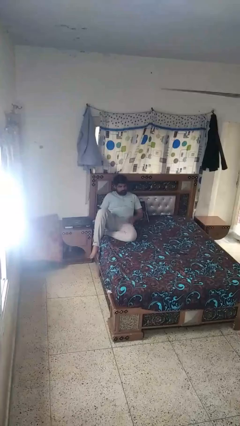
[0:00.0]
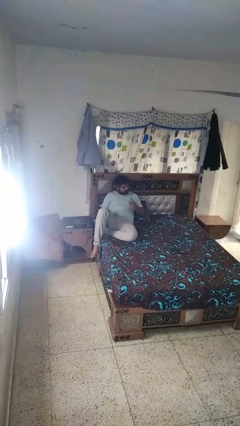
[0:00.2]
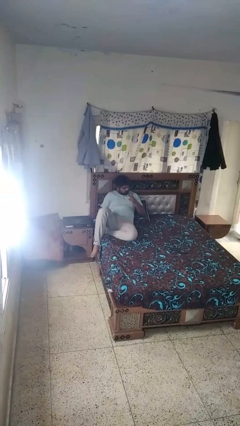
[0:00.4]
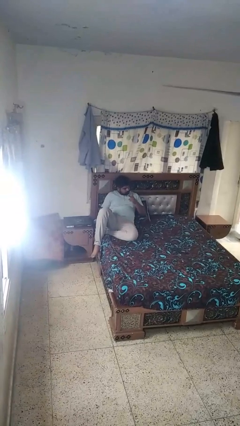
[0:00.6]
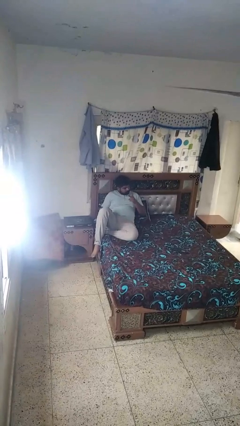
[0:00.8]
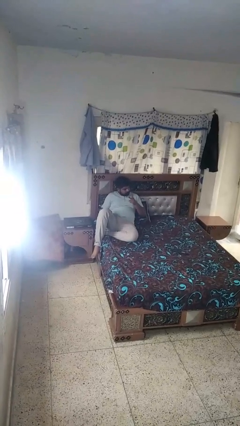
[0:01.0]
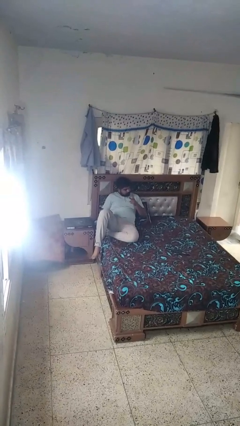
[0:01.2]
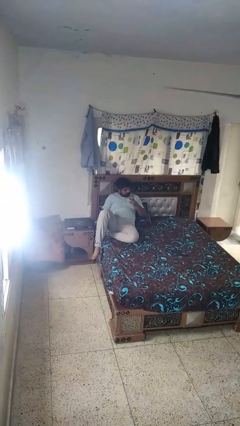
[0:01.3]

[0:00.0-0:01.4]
person gestures peace

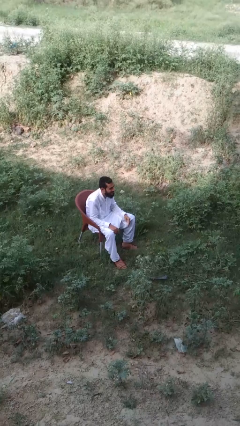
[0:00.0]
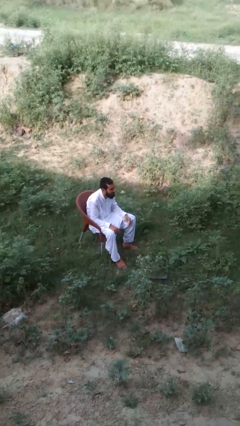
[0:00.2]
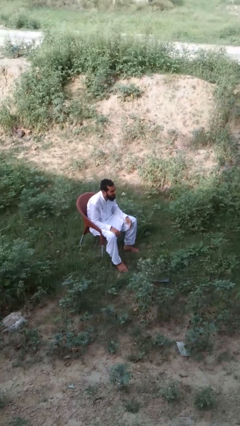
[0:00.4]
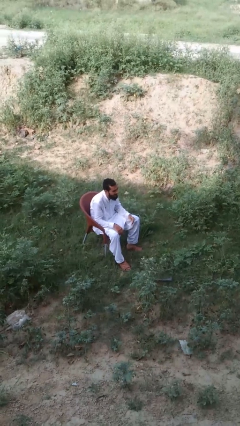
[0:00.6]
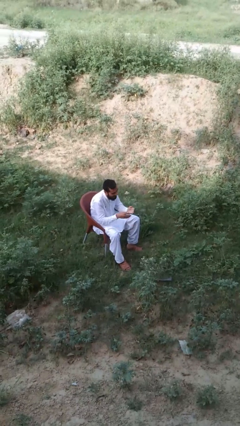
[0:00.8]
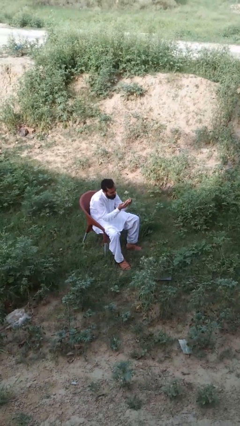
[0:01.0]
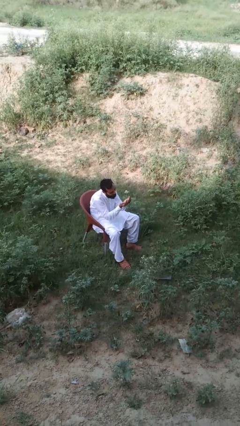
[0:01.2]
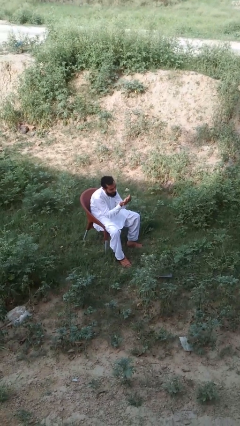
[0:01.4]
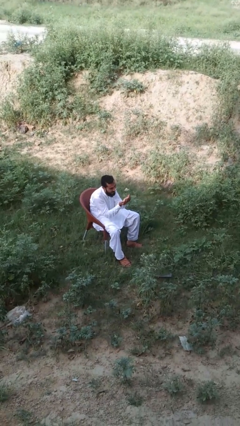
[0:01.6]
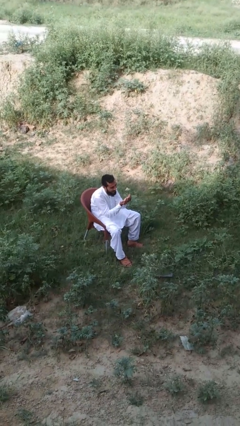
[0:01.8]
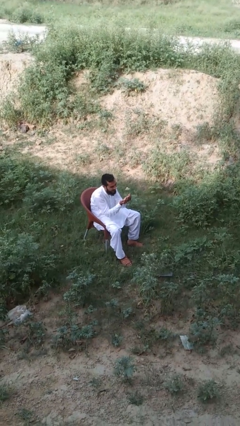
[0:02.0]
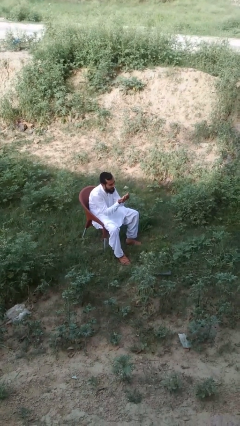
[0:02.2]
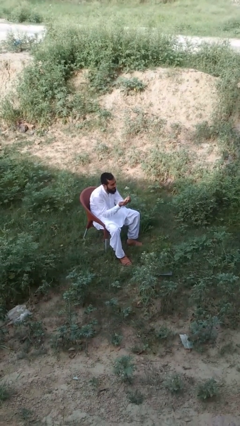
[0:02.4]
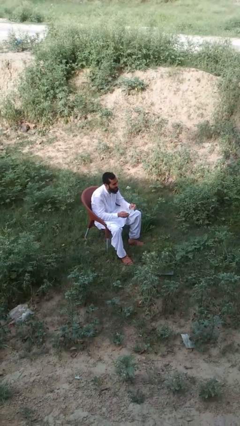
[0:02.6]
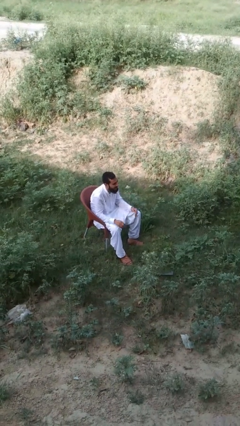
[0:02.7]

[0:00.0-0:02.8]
person prays

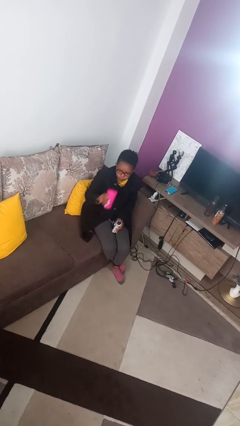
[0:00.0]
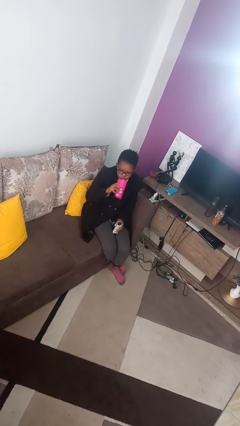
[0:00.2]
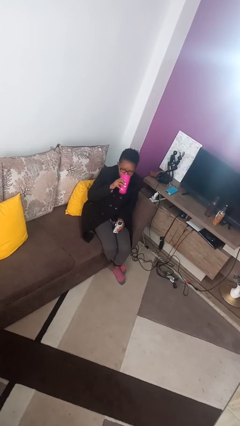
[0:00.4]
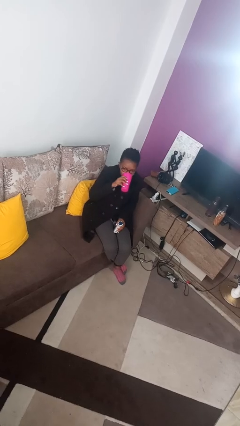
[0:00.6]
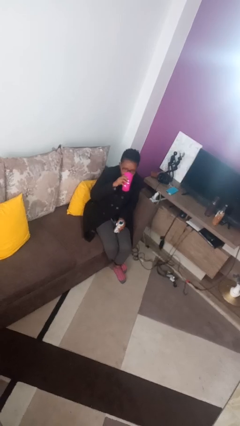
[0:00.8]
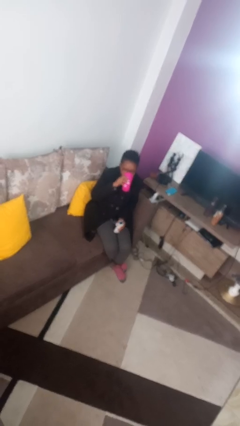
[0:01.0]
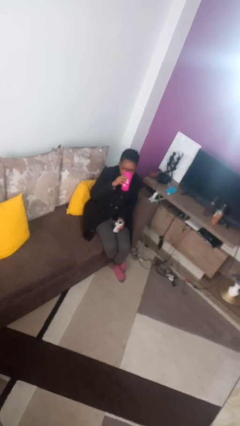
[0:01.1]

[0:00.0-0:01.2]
person drinks from cup

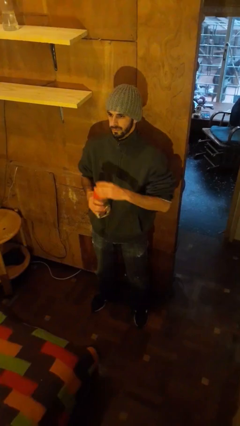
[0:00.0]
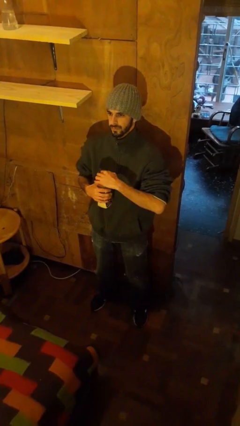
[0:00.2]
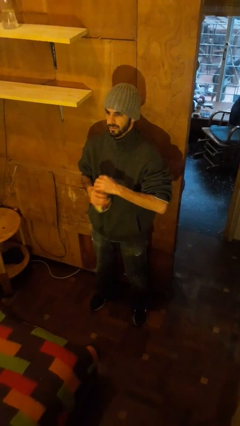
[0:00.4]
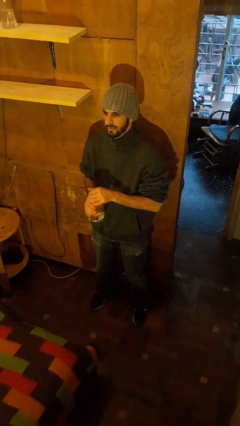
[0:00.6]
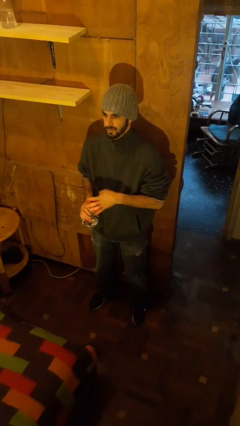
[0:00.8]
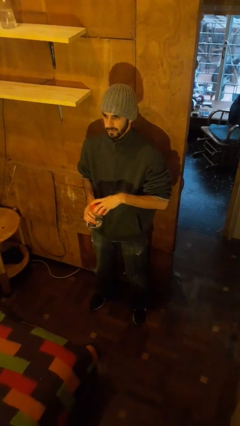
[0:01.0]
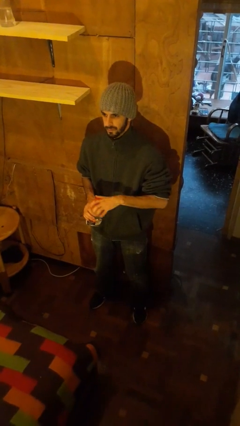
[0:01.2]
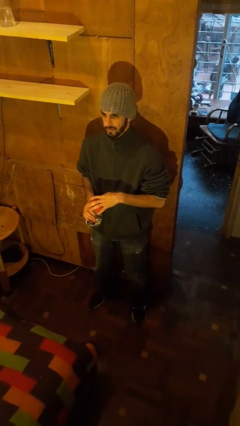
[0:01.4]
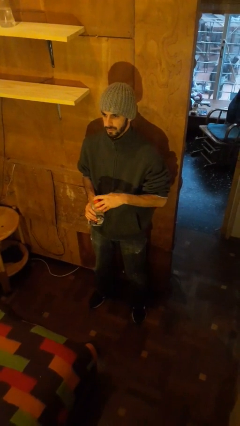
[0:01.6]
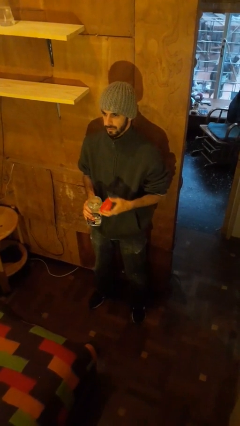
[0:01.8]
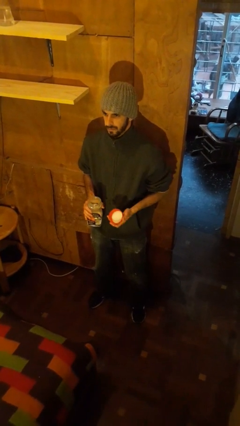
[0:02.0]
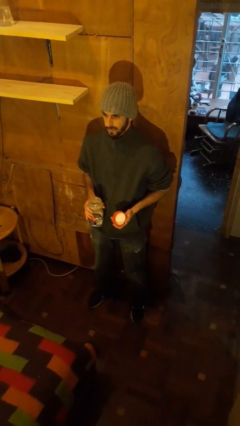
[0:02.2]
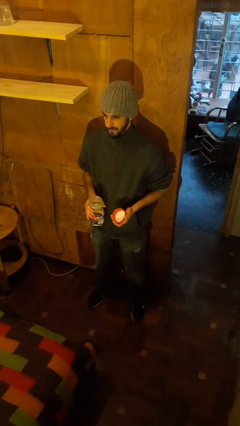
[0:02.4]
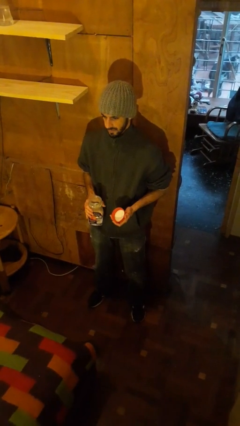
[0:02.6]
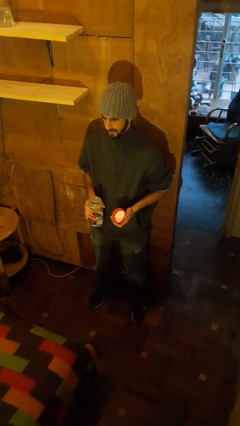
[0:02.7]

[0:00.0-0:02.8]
person opens jar

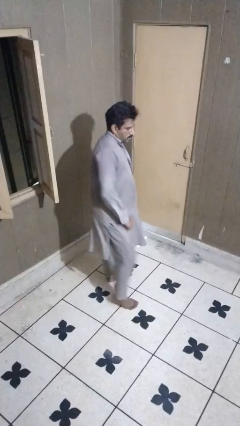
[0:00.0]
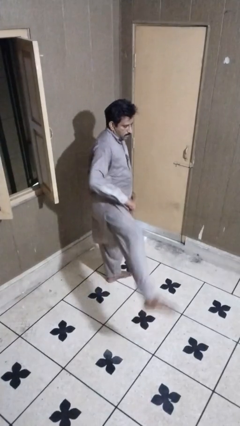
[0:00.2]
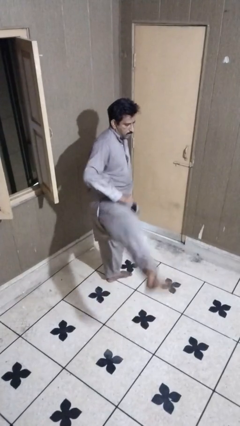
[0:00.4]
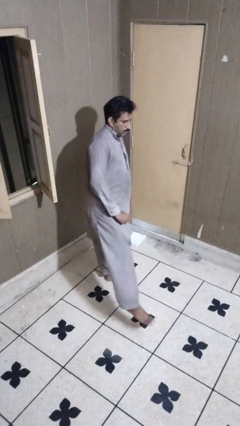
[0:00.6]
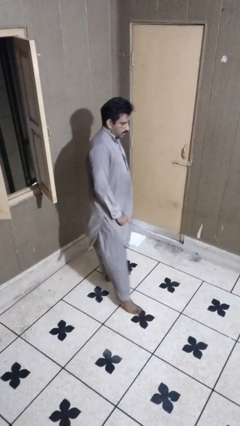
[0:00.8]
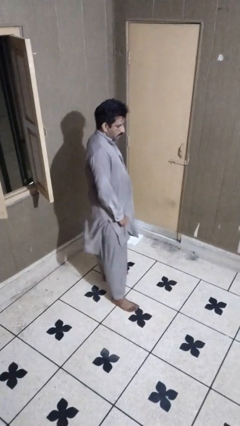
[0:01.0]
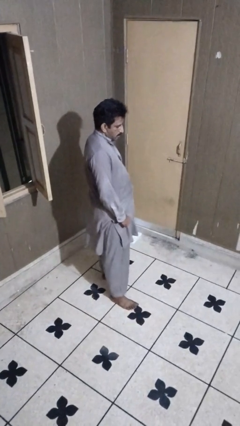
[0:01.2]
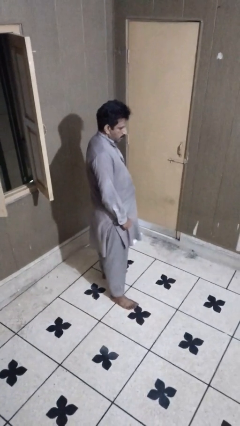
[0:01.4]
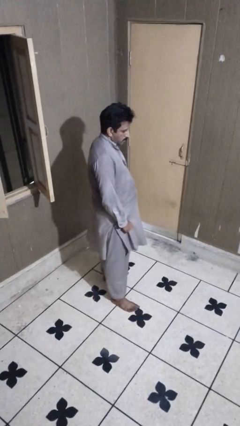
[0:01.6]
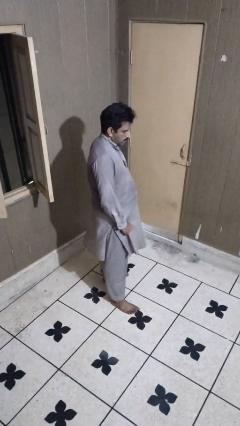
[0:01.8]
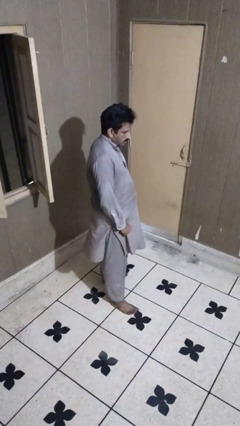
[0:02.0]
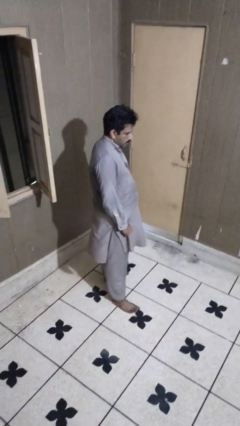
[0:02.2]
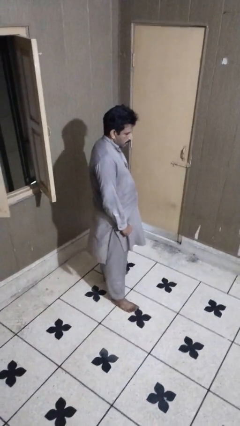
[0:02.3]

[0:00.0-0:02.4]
person karate kicks

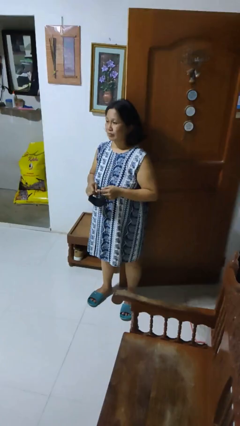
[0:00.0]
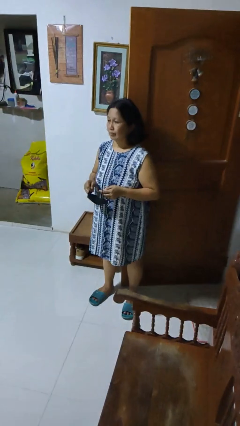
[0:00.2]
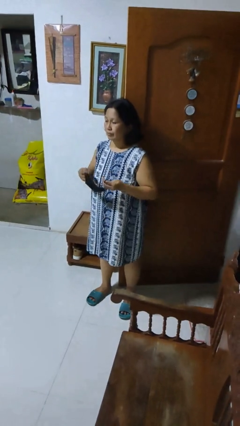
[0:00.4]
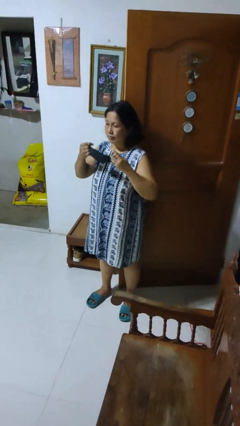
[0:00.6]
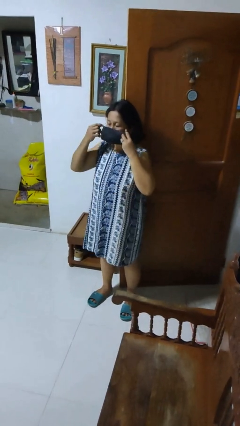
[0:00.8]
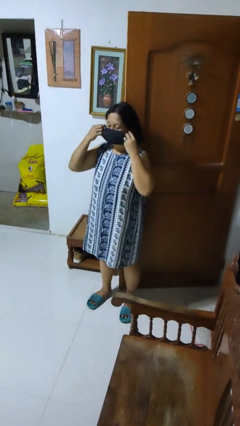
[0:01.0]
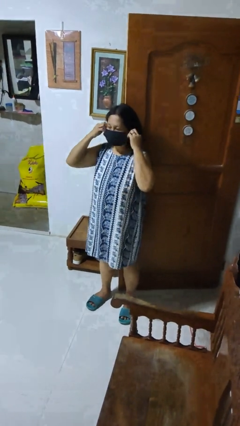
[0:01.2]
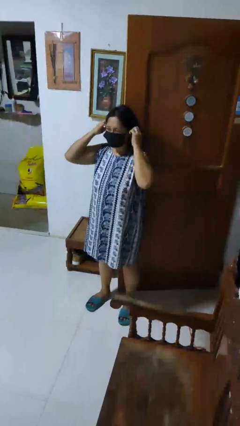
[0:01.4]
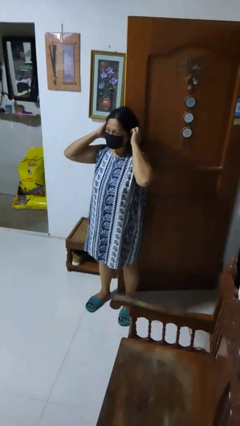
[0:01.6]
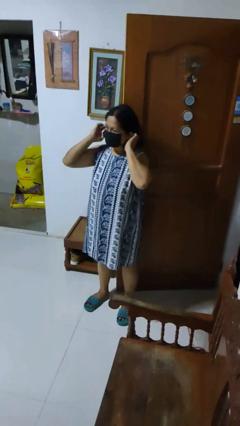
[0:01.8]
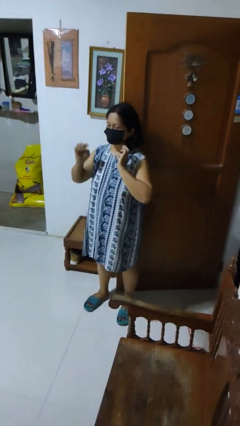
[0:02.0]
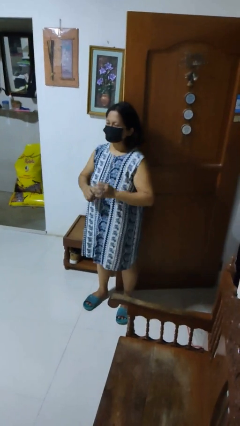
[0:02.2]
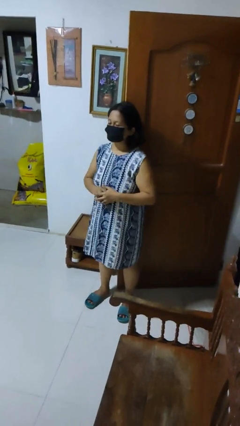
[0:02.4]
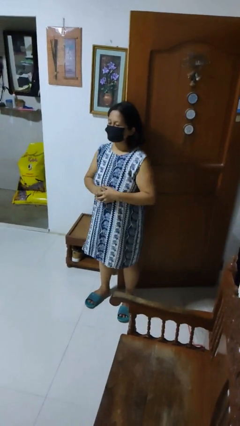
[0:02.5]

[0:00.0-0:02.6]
person puts on facemask

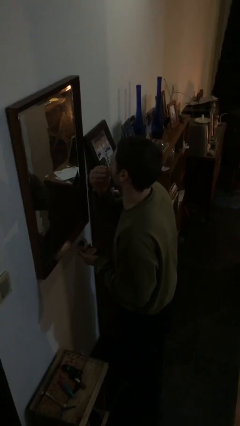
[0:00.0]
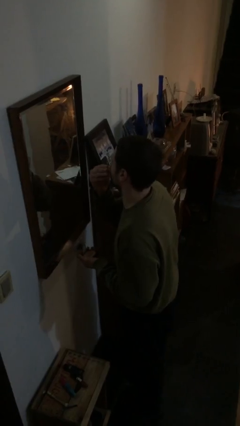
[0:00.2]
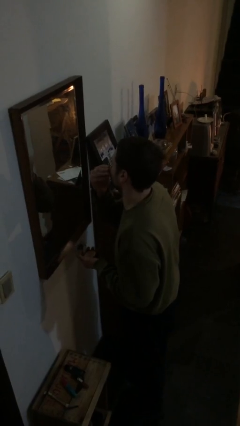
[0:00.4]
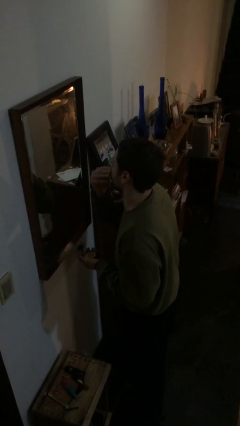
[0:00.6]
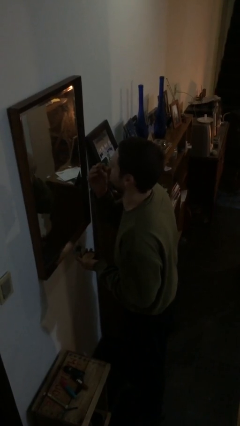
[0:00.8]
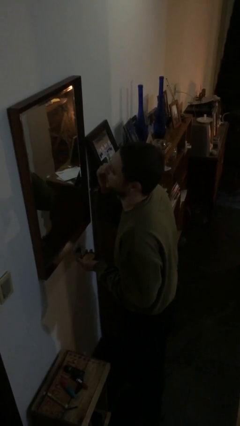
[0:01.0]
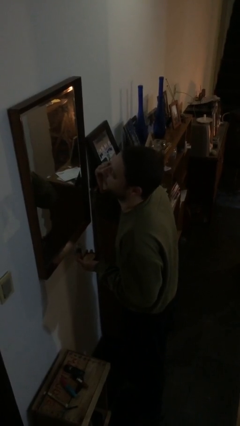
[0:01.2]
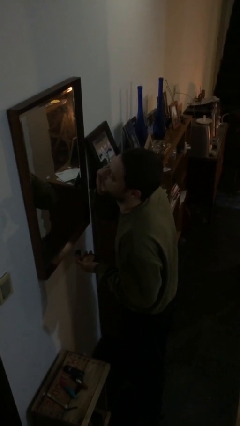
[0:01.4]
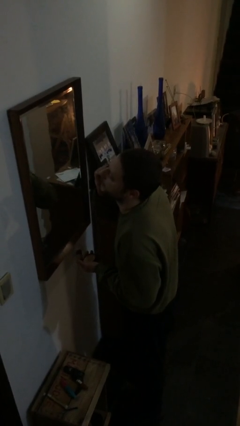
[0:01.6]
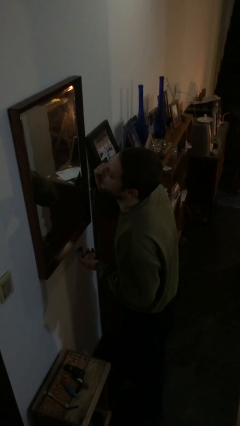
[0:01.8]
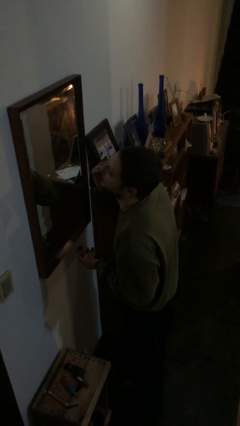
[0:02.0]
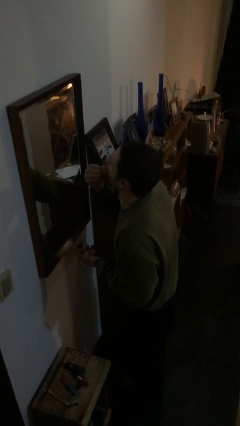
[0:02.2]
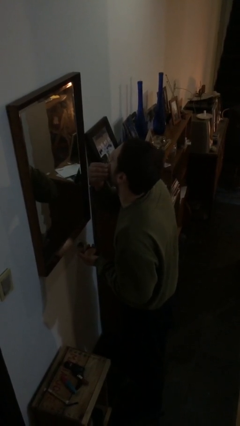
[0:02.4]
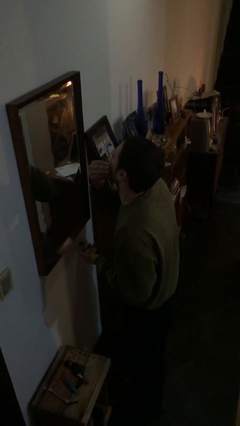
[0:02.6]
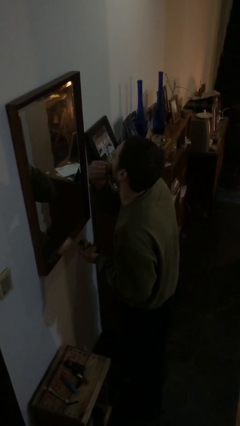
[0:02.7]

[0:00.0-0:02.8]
person applies foundation makeup

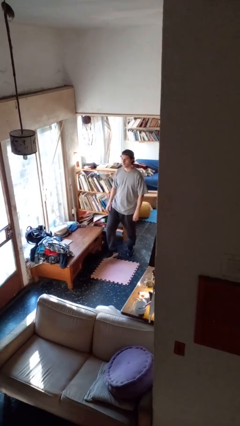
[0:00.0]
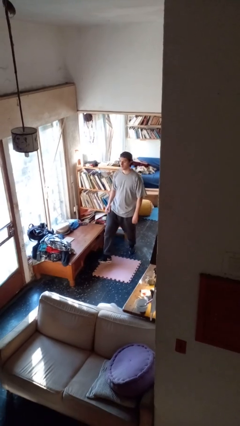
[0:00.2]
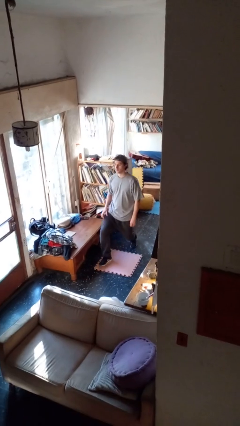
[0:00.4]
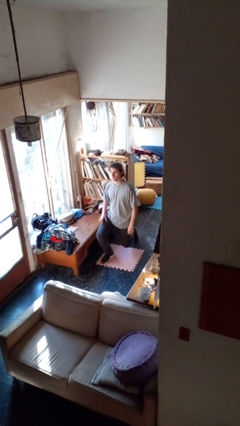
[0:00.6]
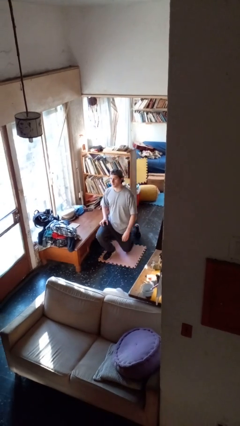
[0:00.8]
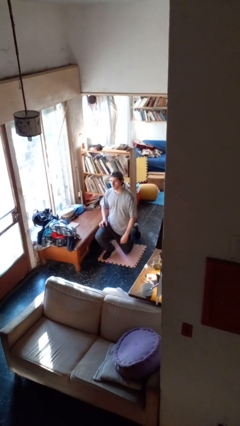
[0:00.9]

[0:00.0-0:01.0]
person kneels
